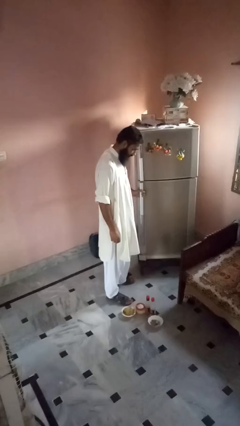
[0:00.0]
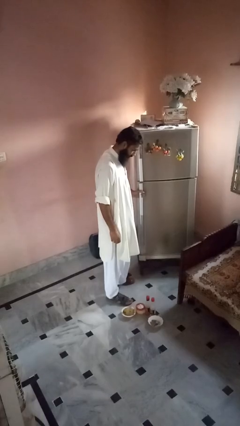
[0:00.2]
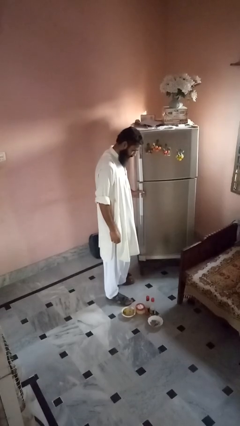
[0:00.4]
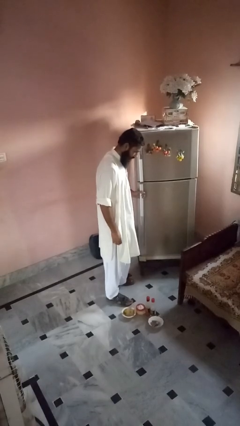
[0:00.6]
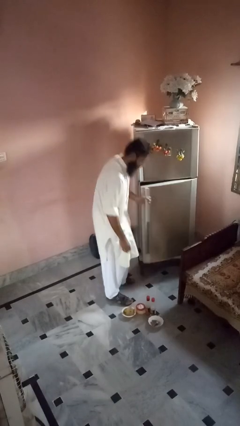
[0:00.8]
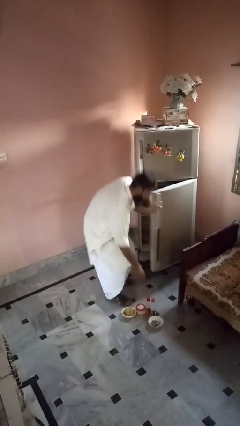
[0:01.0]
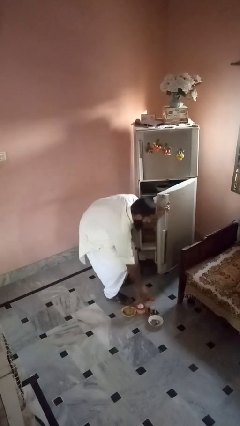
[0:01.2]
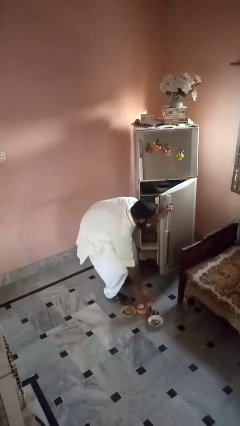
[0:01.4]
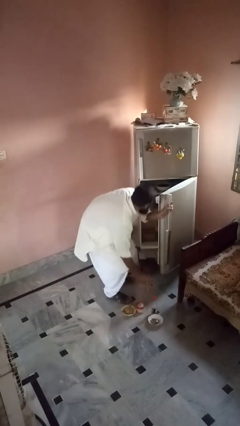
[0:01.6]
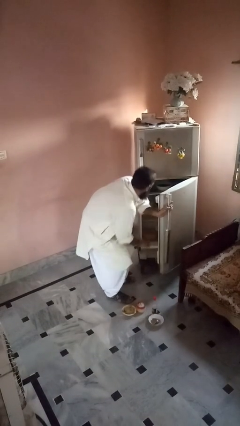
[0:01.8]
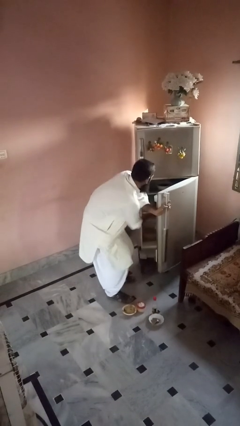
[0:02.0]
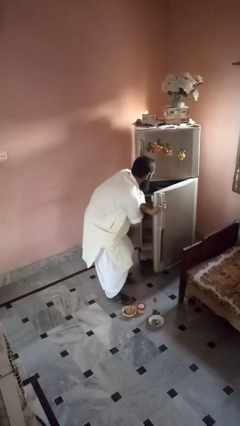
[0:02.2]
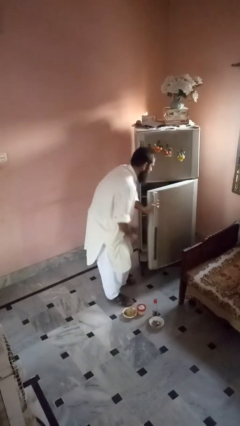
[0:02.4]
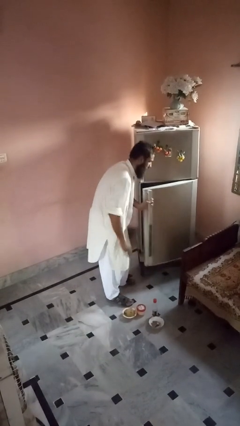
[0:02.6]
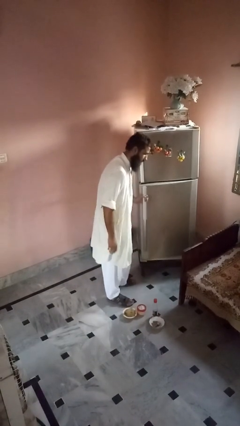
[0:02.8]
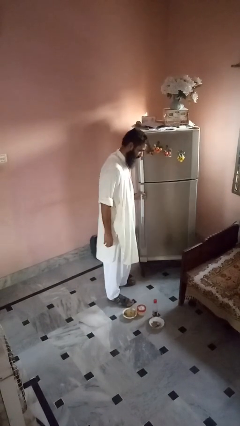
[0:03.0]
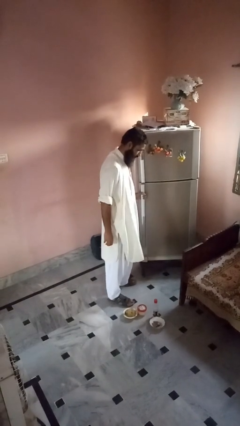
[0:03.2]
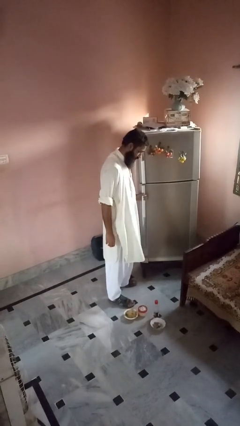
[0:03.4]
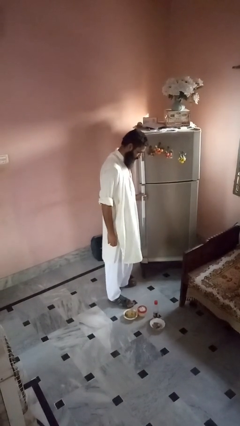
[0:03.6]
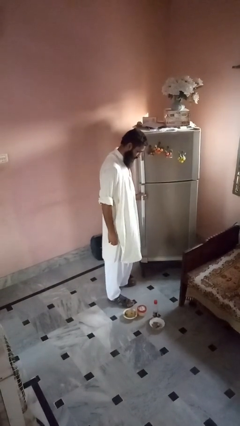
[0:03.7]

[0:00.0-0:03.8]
person loads groceries into refrigerator

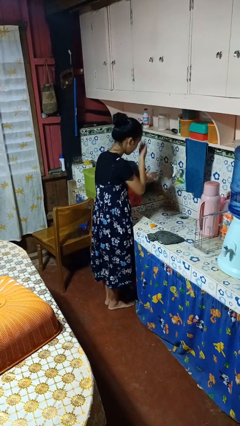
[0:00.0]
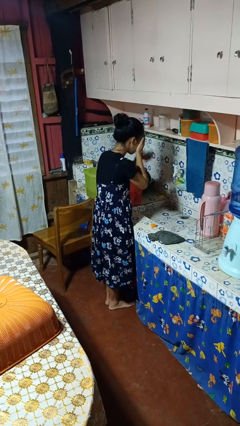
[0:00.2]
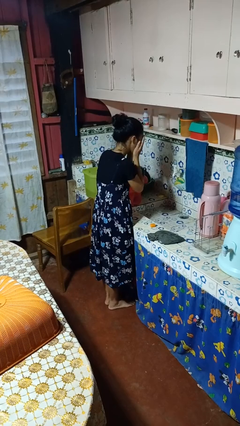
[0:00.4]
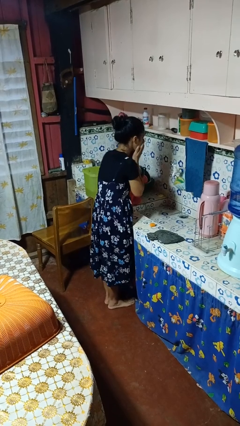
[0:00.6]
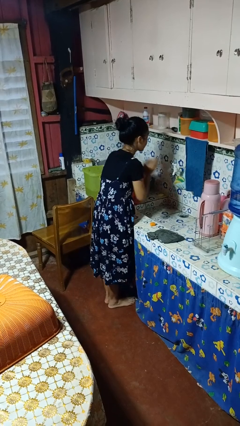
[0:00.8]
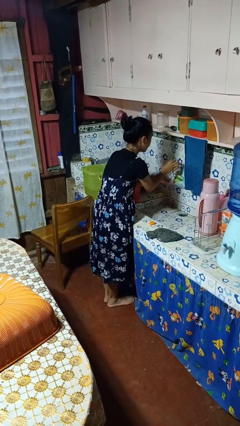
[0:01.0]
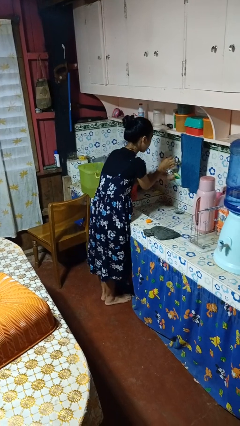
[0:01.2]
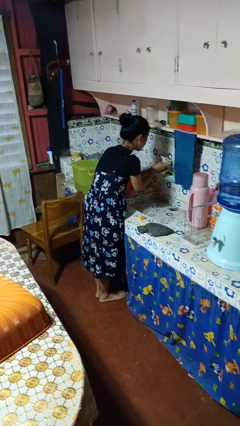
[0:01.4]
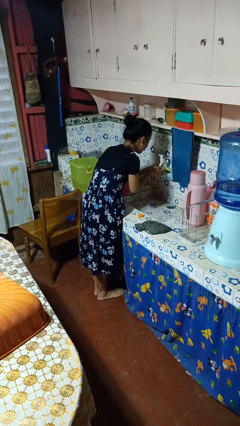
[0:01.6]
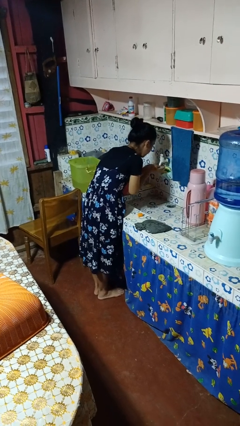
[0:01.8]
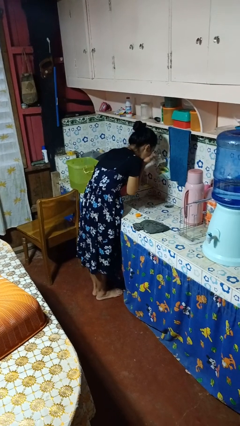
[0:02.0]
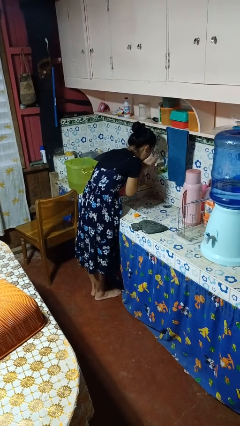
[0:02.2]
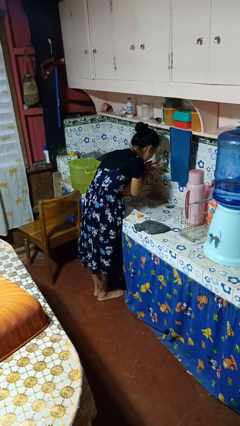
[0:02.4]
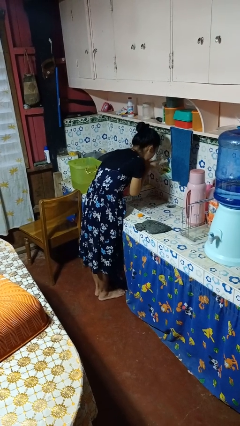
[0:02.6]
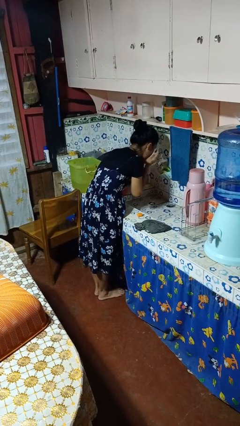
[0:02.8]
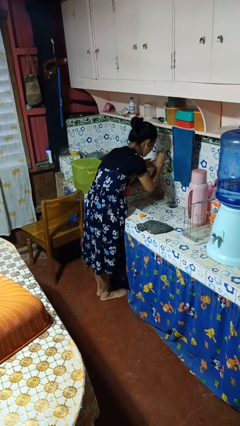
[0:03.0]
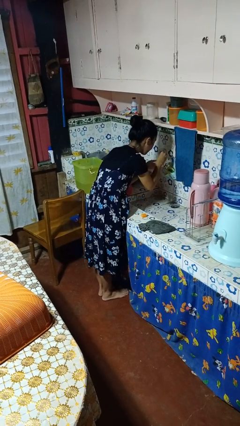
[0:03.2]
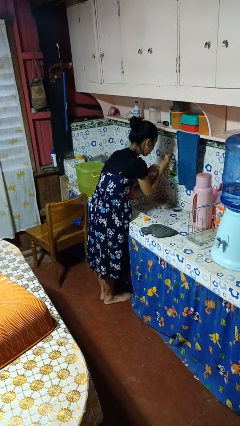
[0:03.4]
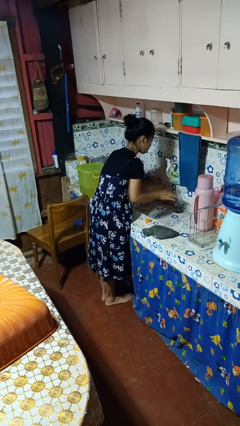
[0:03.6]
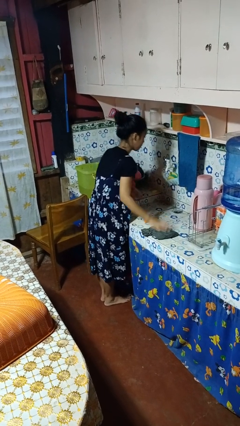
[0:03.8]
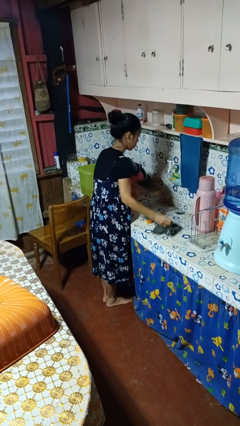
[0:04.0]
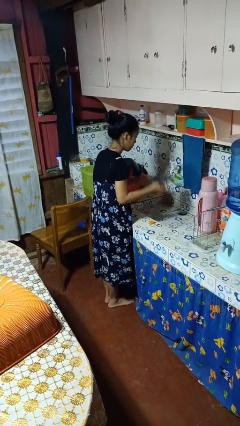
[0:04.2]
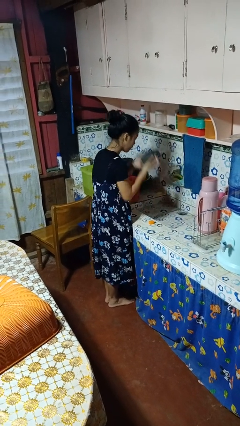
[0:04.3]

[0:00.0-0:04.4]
person washes face

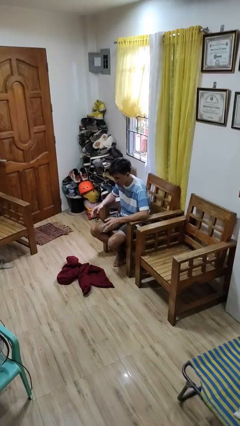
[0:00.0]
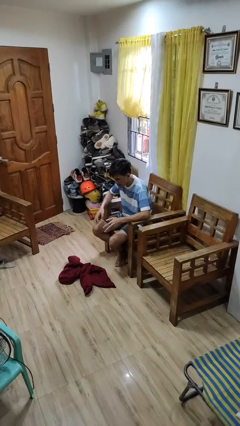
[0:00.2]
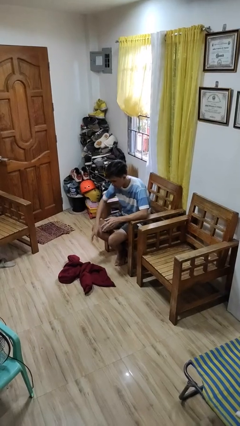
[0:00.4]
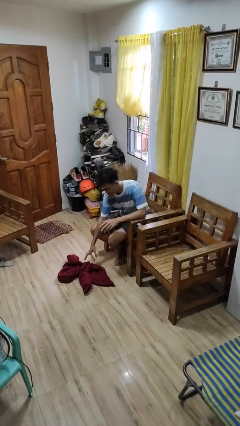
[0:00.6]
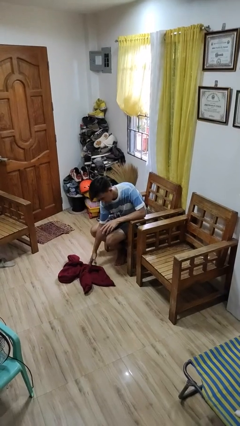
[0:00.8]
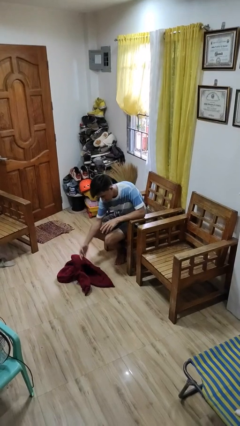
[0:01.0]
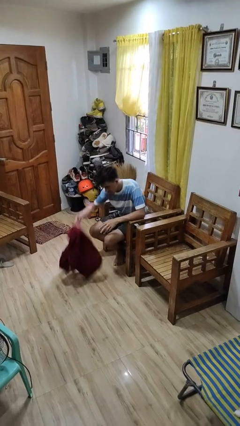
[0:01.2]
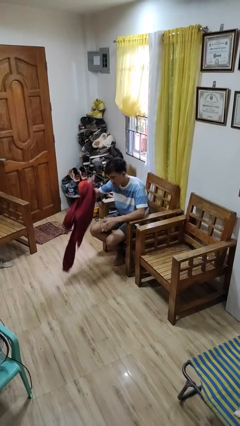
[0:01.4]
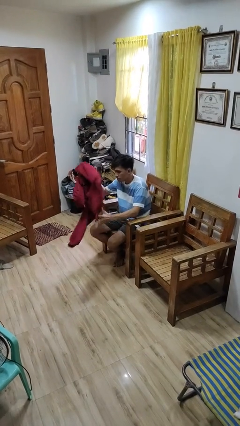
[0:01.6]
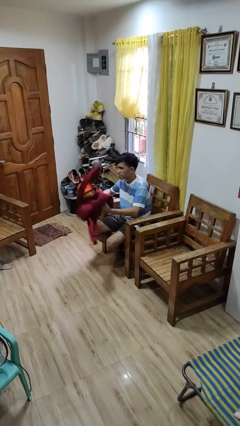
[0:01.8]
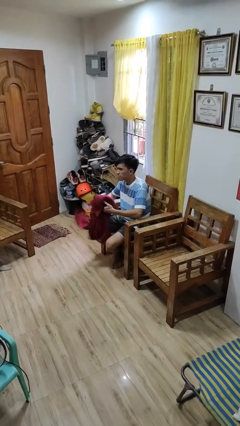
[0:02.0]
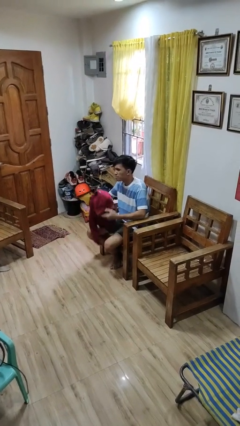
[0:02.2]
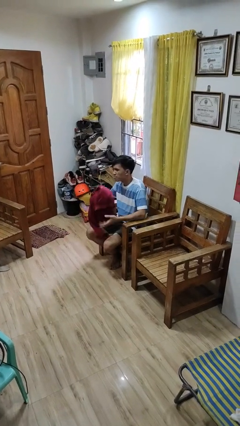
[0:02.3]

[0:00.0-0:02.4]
person picks up object from floor

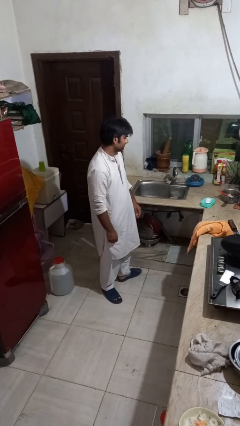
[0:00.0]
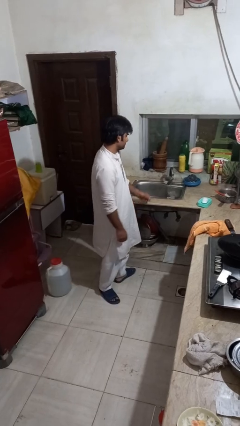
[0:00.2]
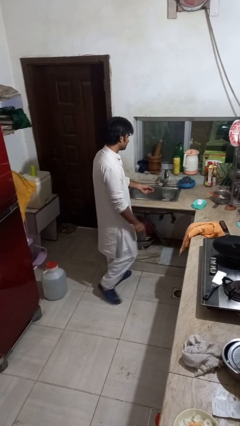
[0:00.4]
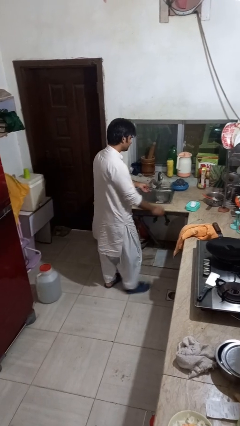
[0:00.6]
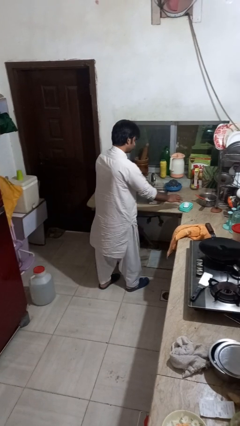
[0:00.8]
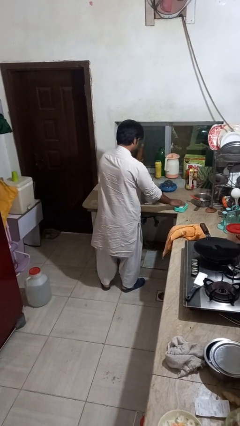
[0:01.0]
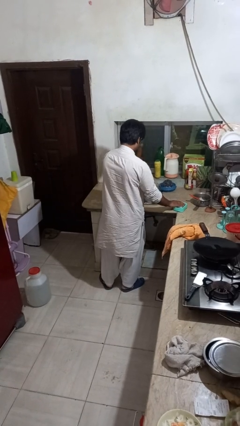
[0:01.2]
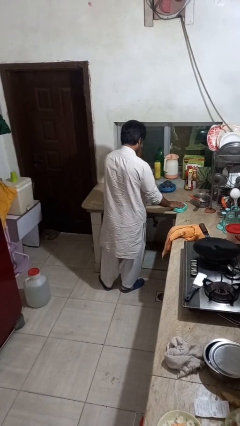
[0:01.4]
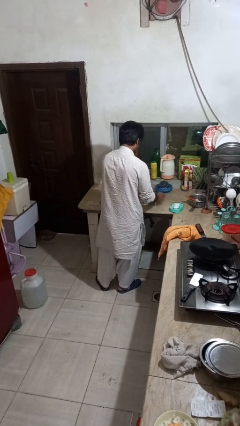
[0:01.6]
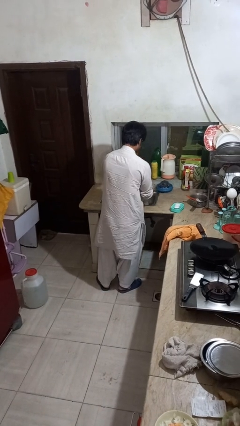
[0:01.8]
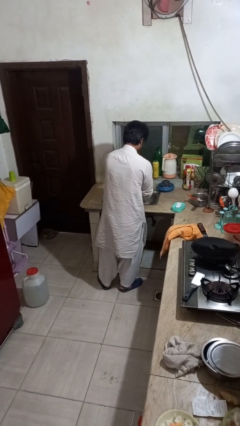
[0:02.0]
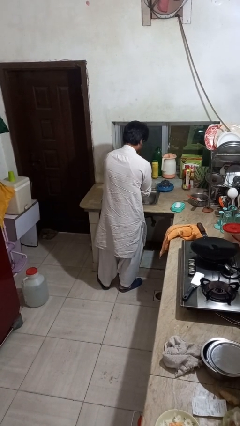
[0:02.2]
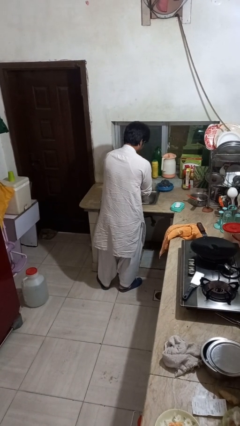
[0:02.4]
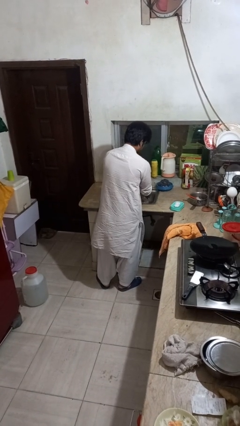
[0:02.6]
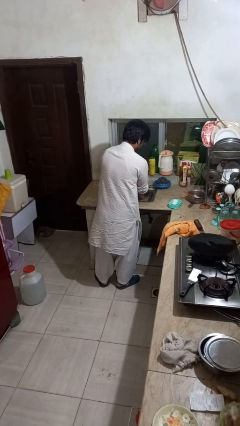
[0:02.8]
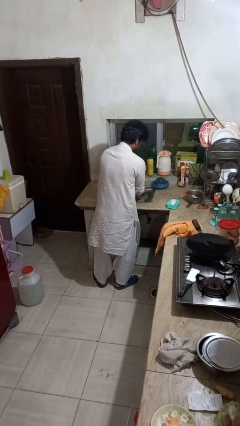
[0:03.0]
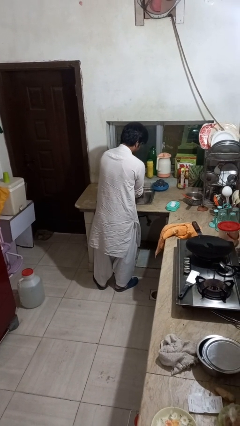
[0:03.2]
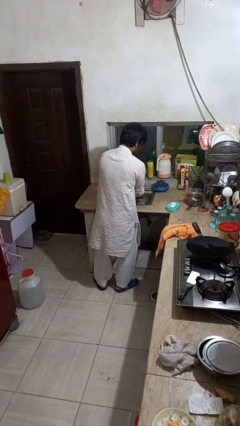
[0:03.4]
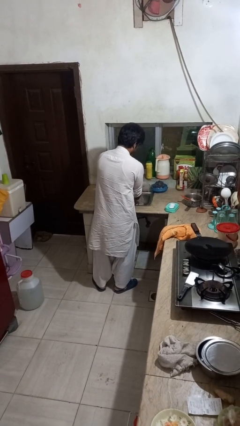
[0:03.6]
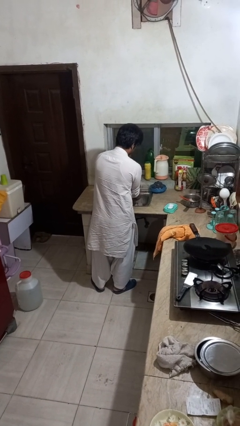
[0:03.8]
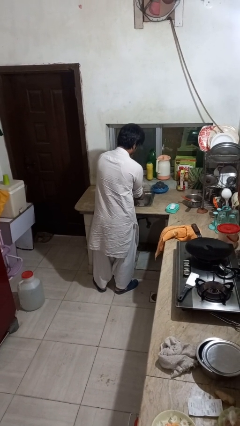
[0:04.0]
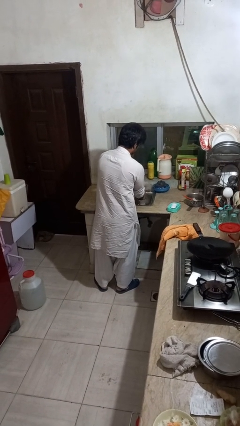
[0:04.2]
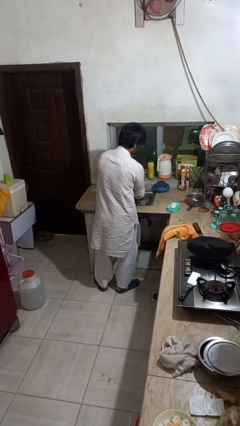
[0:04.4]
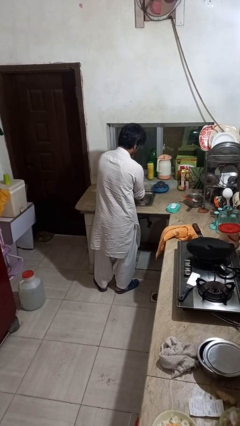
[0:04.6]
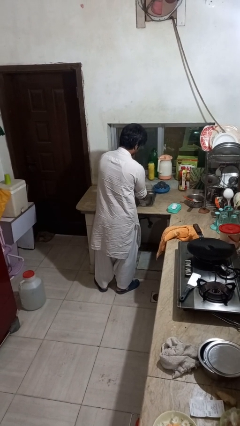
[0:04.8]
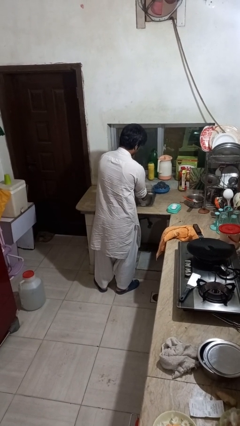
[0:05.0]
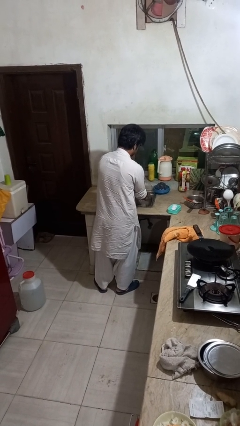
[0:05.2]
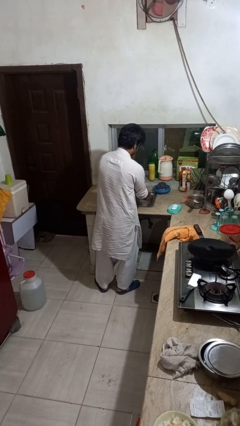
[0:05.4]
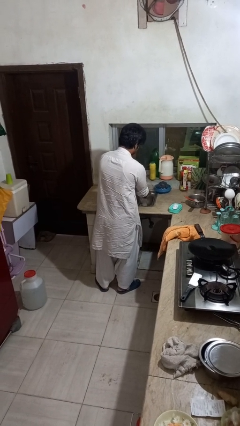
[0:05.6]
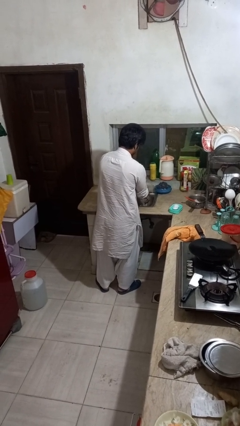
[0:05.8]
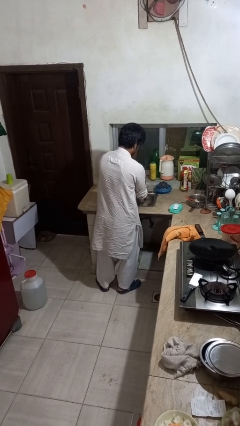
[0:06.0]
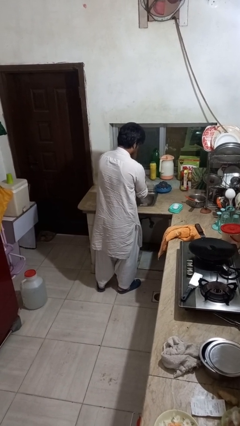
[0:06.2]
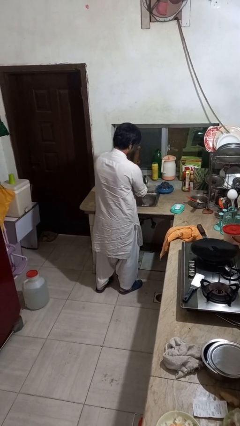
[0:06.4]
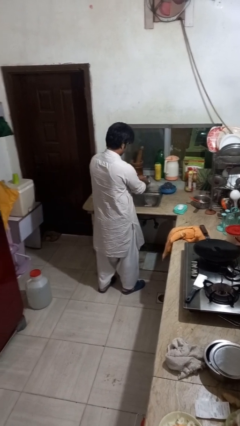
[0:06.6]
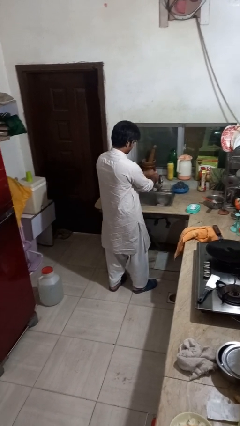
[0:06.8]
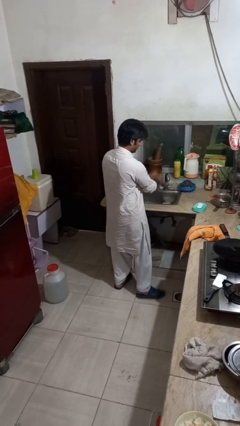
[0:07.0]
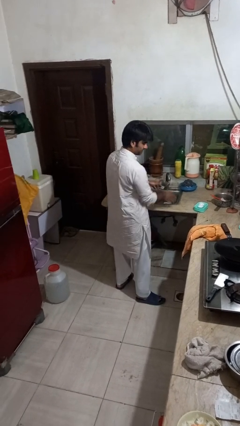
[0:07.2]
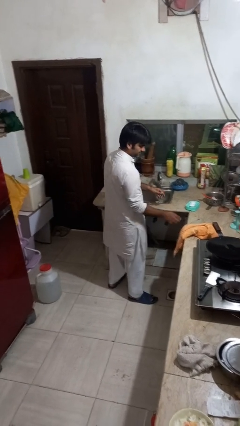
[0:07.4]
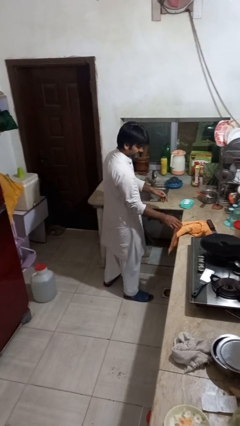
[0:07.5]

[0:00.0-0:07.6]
person washes hands
